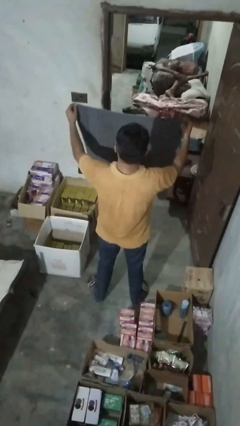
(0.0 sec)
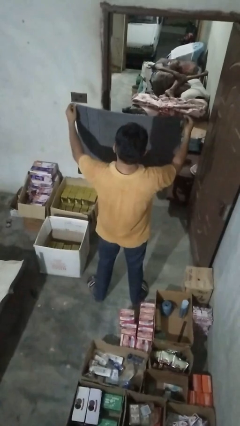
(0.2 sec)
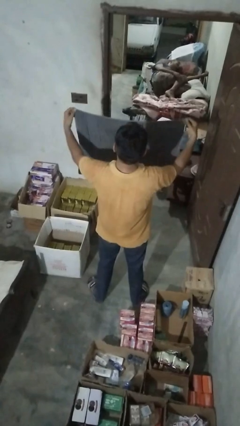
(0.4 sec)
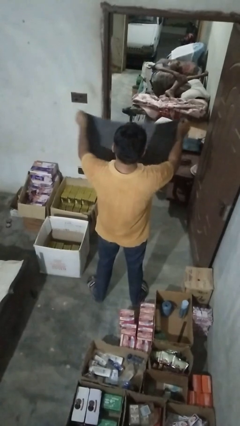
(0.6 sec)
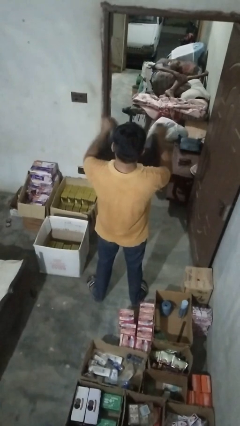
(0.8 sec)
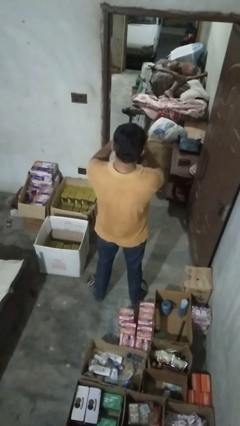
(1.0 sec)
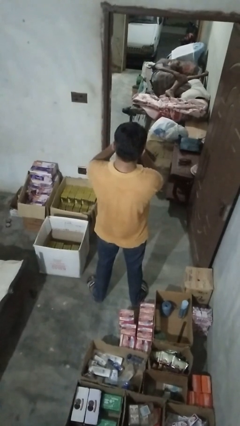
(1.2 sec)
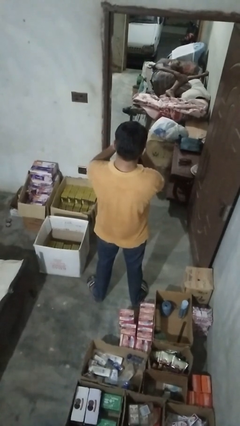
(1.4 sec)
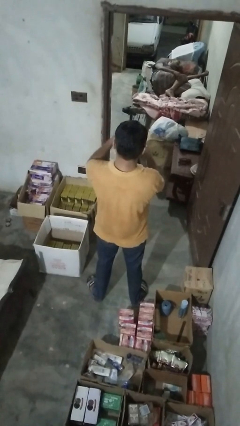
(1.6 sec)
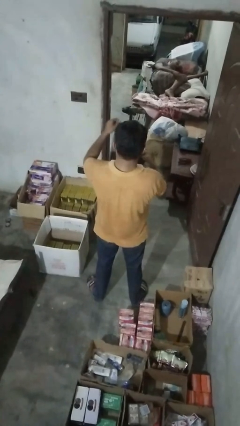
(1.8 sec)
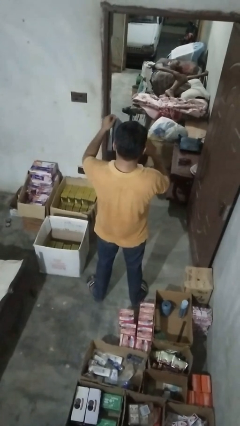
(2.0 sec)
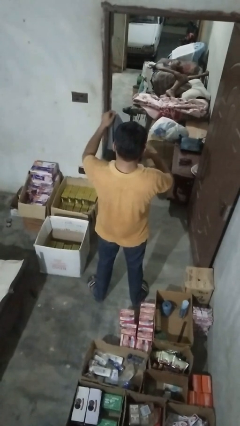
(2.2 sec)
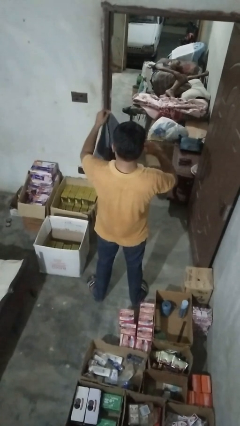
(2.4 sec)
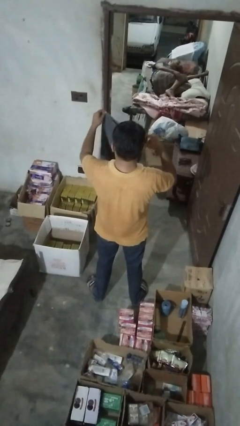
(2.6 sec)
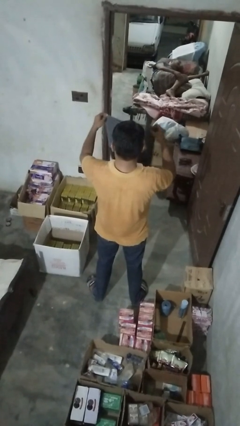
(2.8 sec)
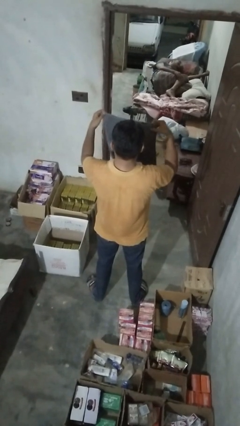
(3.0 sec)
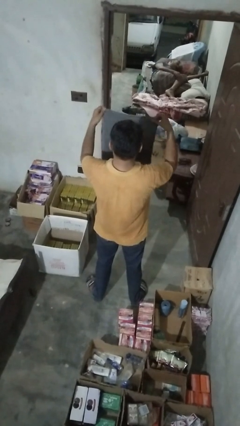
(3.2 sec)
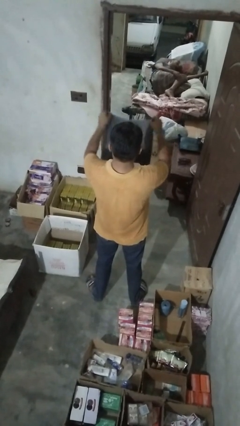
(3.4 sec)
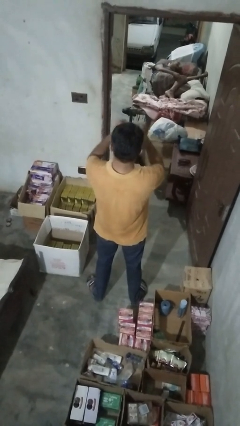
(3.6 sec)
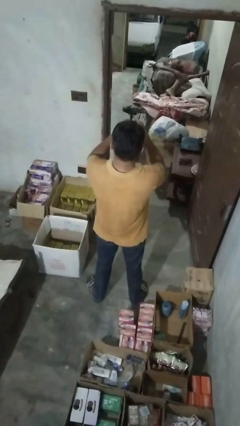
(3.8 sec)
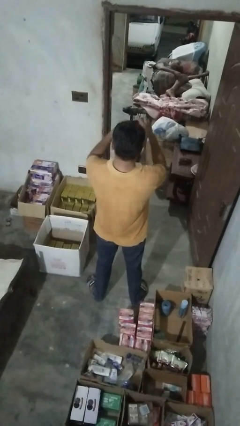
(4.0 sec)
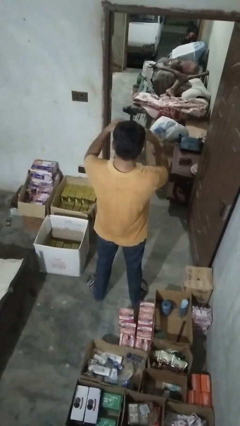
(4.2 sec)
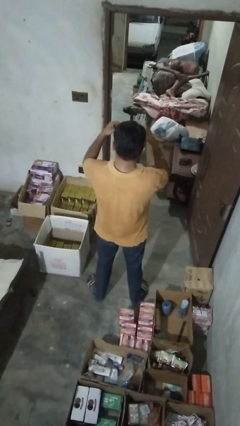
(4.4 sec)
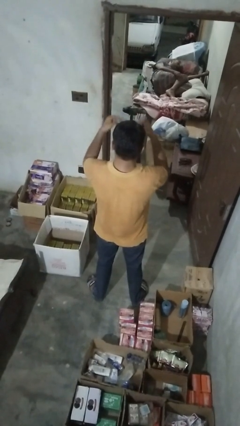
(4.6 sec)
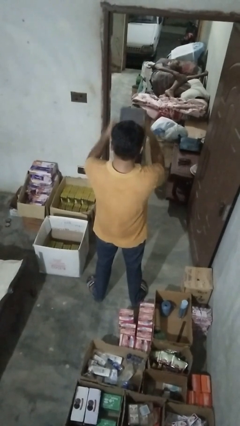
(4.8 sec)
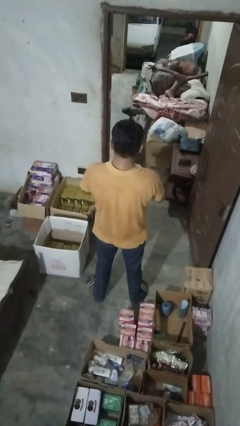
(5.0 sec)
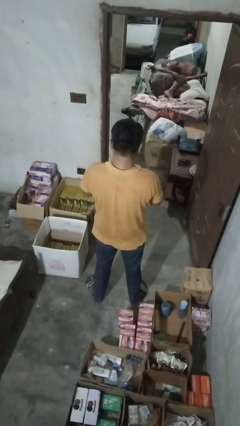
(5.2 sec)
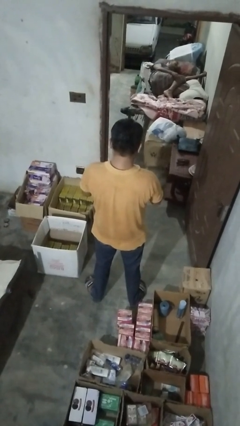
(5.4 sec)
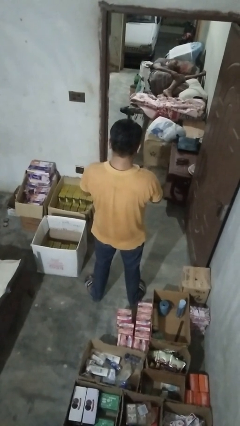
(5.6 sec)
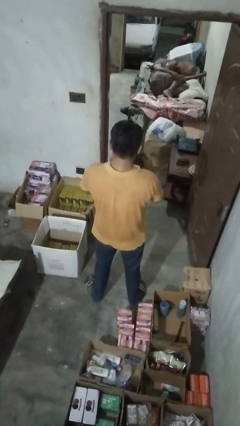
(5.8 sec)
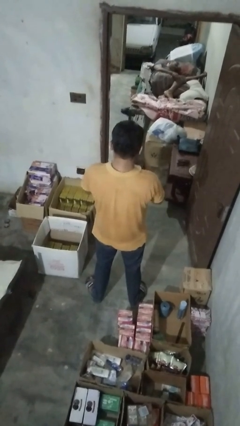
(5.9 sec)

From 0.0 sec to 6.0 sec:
person folds towel

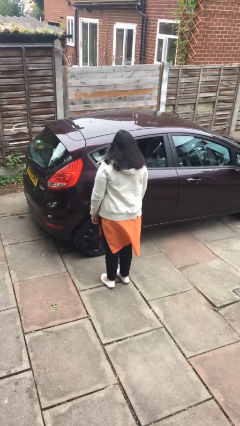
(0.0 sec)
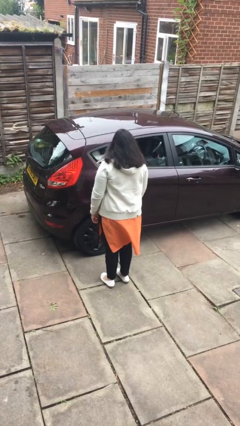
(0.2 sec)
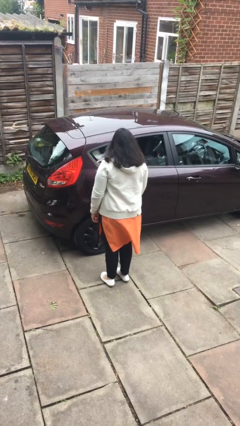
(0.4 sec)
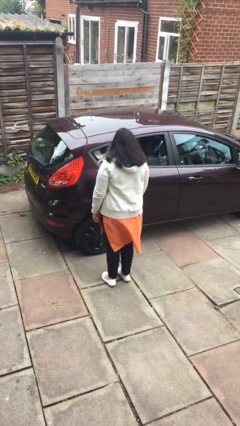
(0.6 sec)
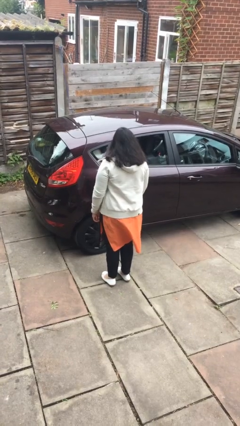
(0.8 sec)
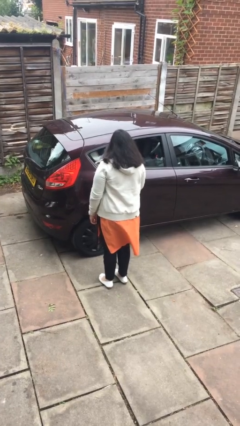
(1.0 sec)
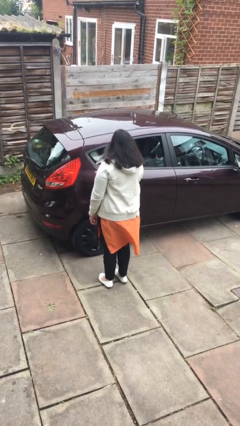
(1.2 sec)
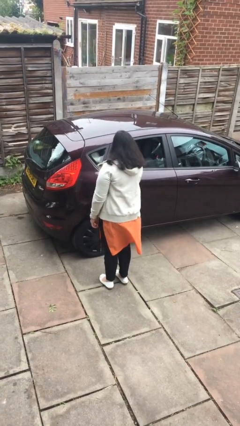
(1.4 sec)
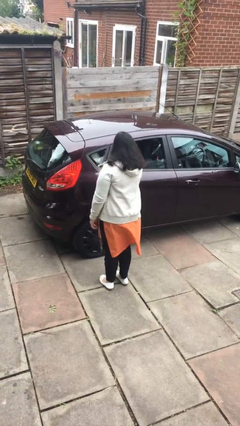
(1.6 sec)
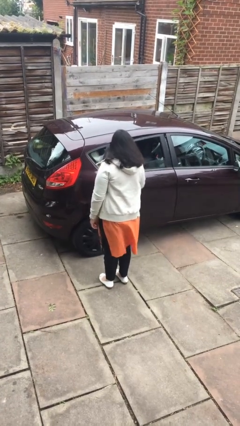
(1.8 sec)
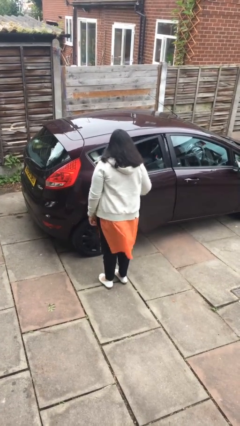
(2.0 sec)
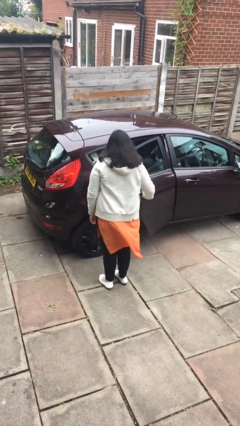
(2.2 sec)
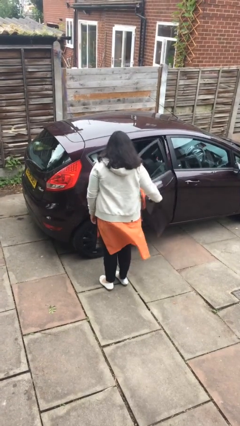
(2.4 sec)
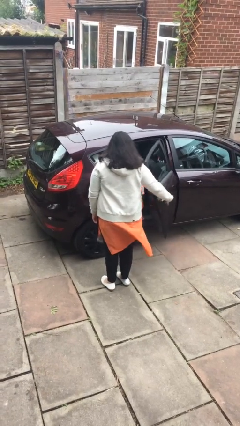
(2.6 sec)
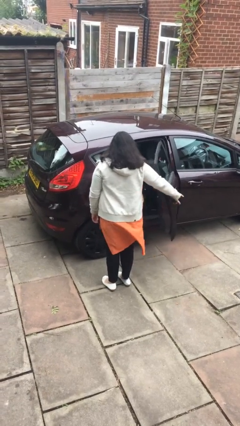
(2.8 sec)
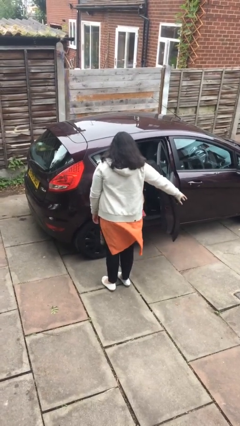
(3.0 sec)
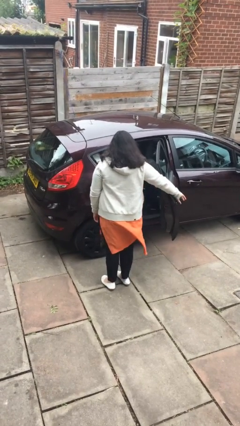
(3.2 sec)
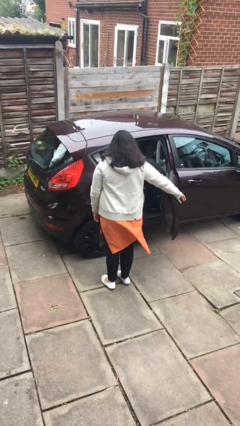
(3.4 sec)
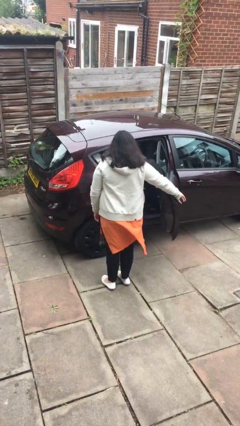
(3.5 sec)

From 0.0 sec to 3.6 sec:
person opens car door

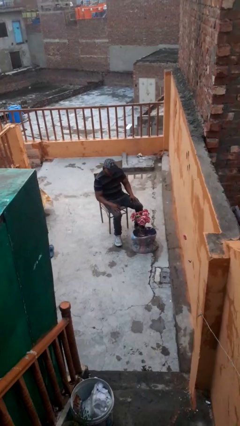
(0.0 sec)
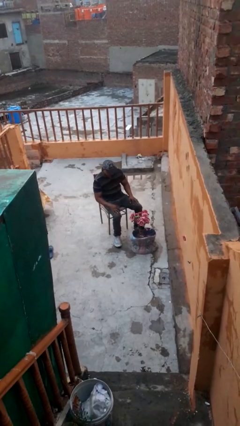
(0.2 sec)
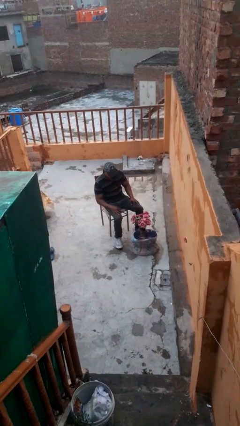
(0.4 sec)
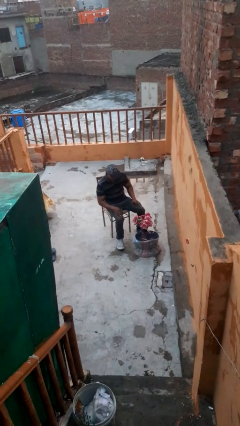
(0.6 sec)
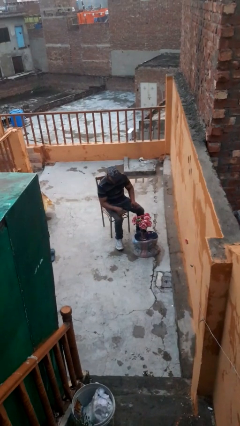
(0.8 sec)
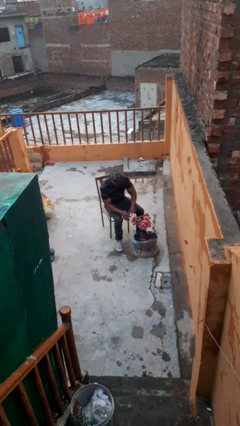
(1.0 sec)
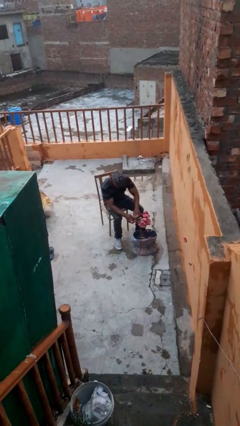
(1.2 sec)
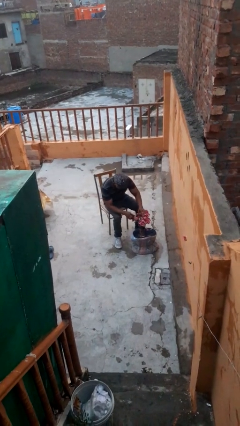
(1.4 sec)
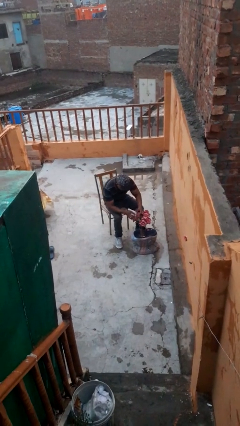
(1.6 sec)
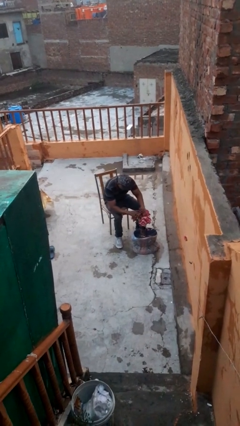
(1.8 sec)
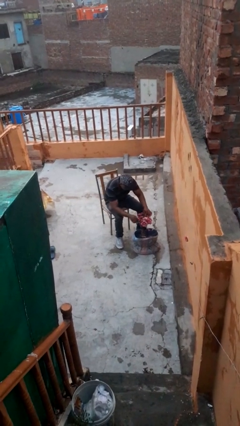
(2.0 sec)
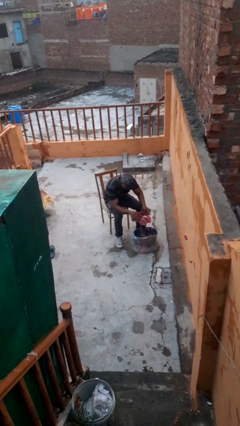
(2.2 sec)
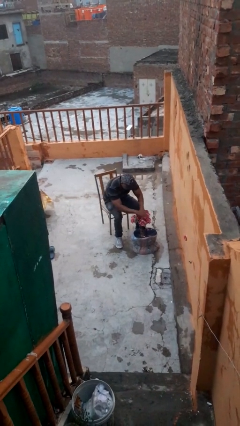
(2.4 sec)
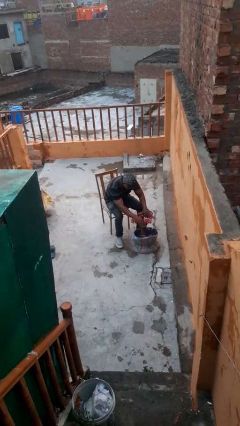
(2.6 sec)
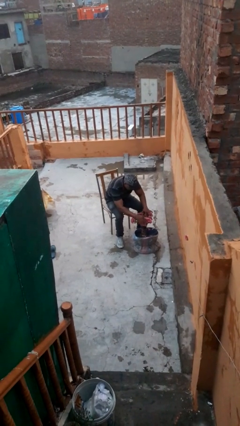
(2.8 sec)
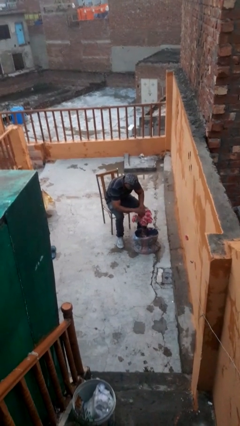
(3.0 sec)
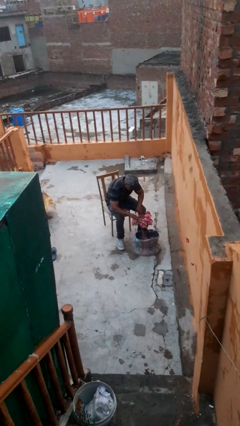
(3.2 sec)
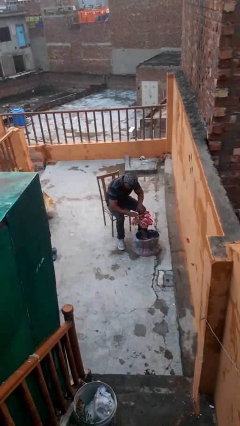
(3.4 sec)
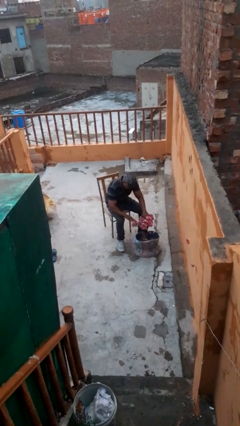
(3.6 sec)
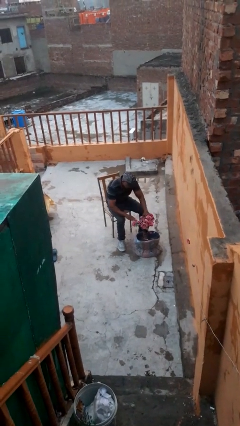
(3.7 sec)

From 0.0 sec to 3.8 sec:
person arranges flowers in vase

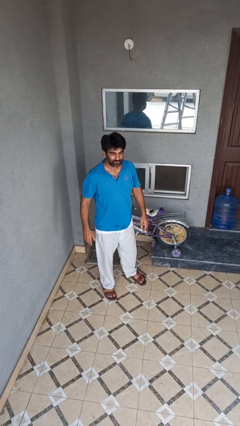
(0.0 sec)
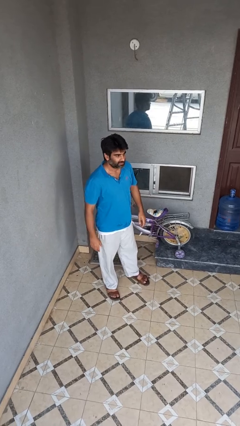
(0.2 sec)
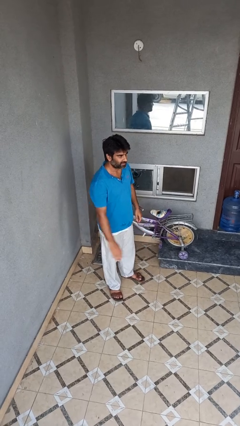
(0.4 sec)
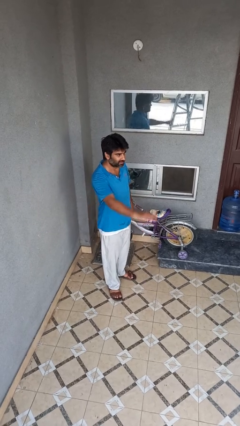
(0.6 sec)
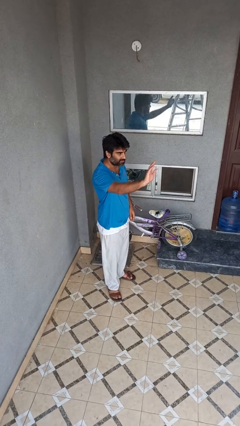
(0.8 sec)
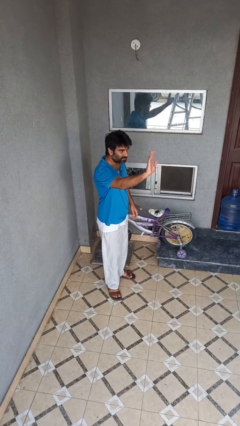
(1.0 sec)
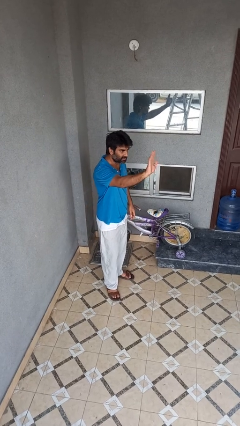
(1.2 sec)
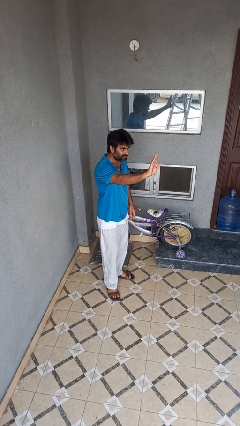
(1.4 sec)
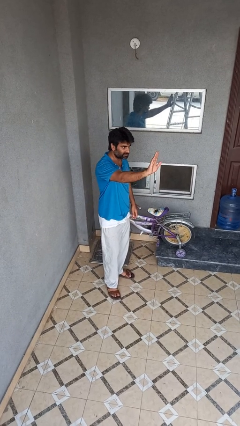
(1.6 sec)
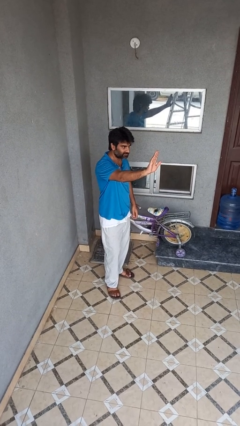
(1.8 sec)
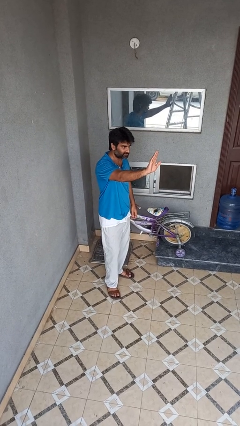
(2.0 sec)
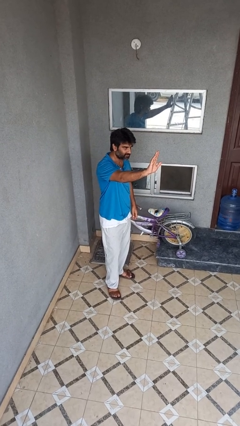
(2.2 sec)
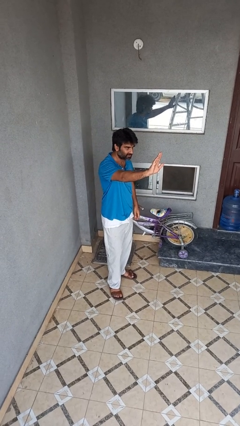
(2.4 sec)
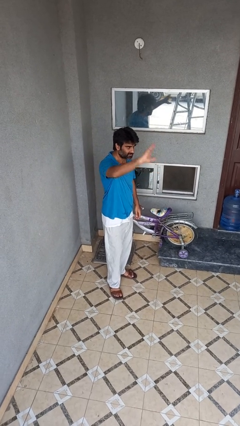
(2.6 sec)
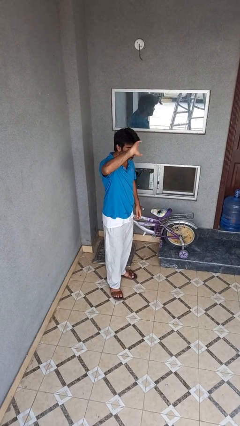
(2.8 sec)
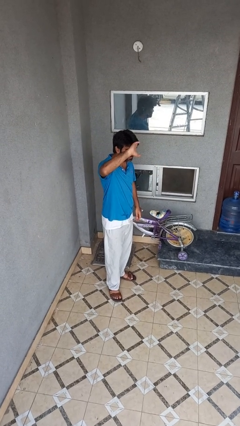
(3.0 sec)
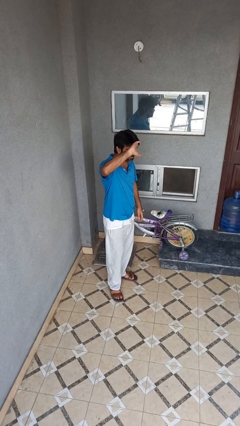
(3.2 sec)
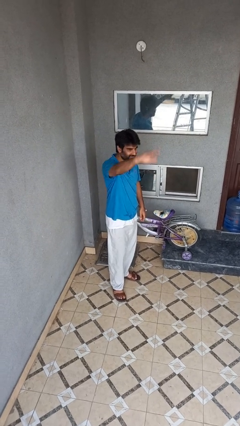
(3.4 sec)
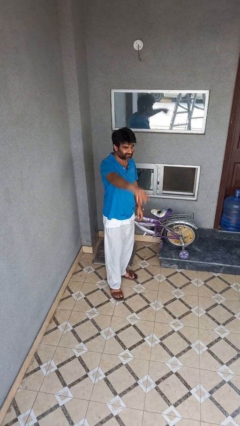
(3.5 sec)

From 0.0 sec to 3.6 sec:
person waves at person

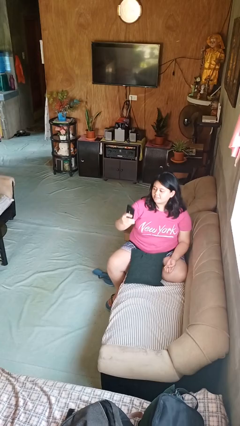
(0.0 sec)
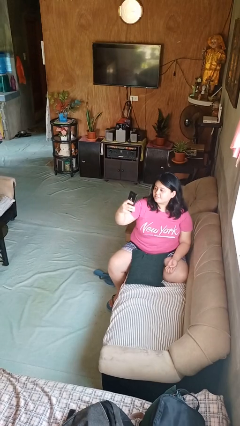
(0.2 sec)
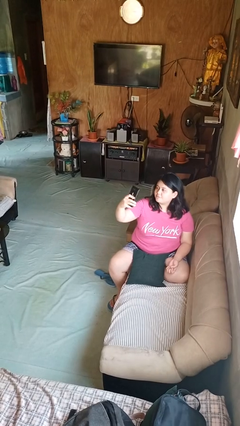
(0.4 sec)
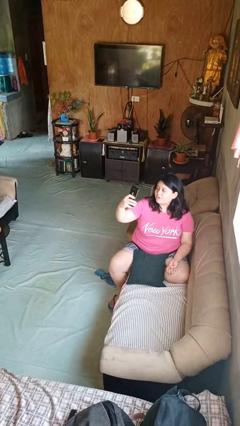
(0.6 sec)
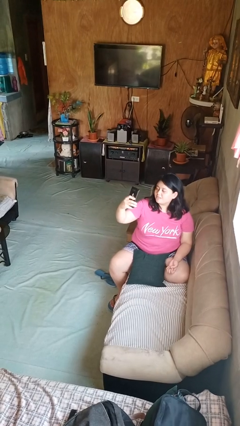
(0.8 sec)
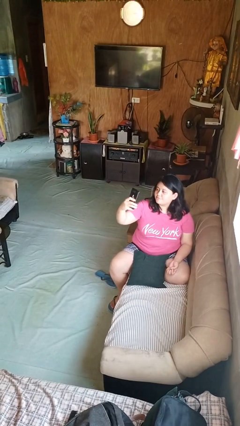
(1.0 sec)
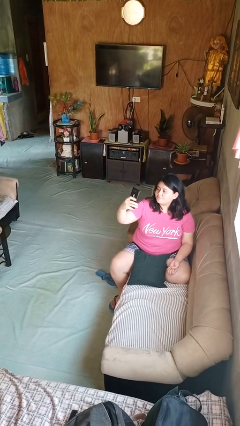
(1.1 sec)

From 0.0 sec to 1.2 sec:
person takes selfie
